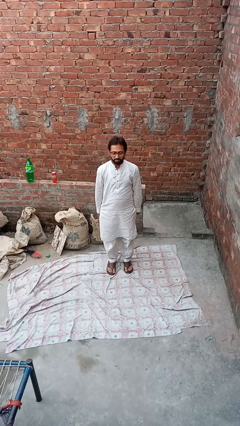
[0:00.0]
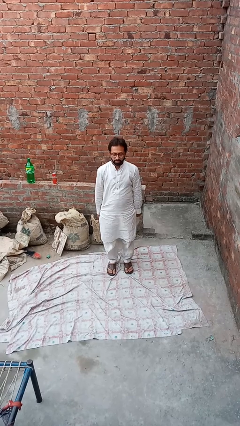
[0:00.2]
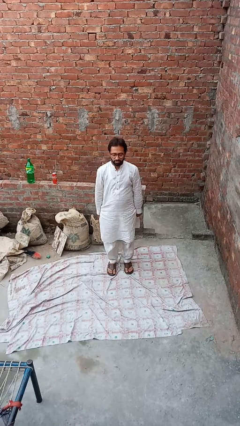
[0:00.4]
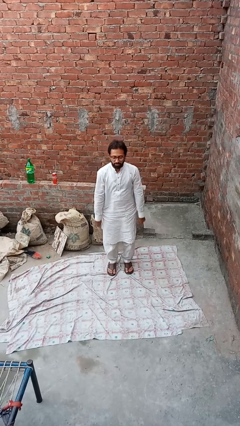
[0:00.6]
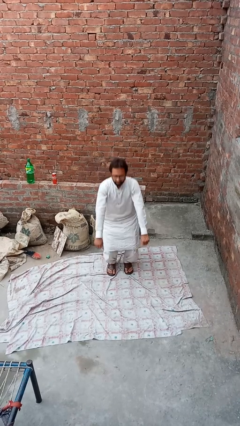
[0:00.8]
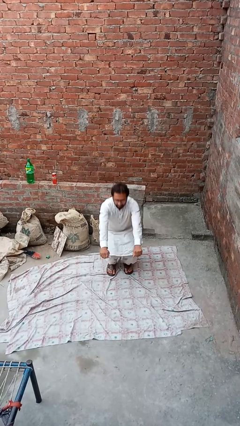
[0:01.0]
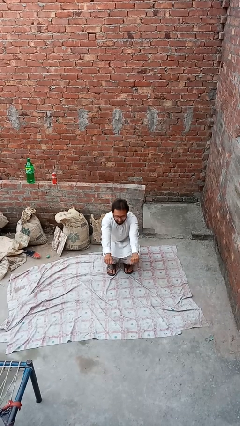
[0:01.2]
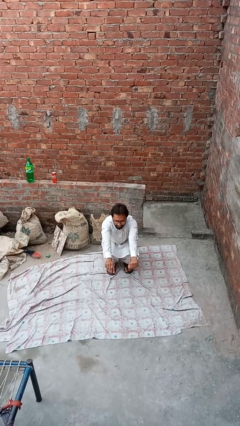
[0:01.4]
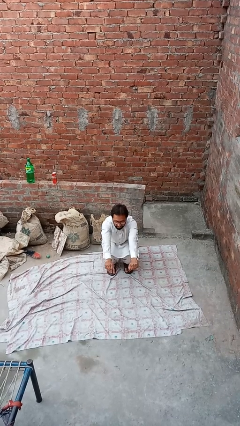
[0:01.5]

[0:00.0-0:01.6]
person squats

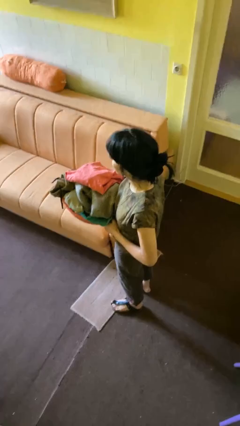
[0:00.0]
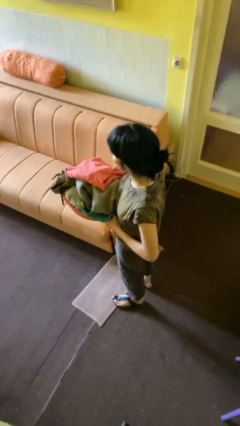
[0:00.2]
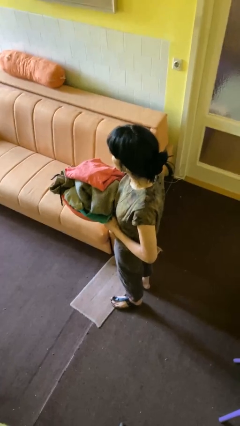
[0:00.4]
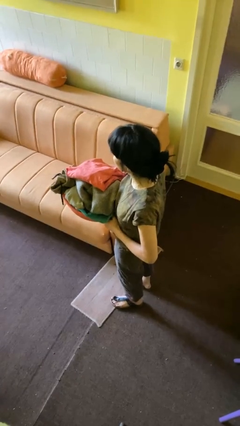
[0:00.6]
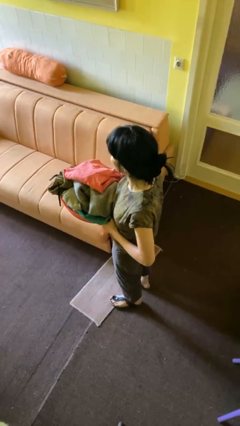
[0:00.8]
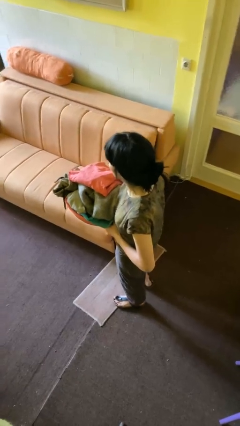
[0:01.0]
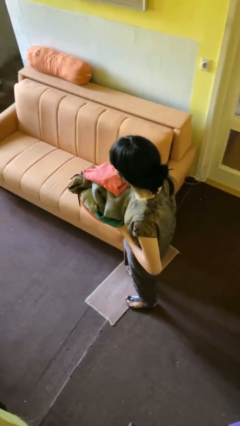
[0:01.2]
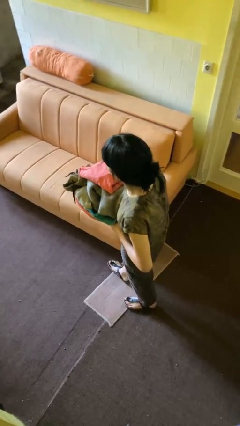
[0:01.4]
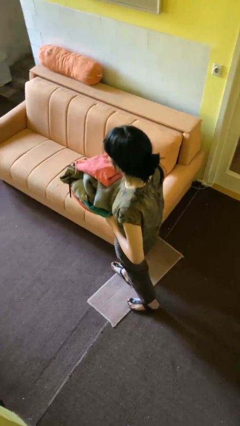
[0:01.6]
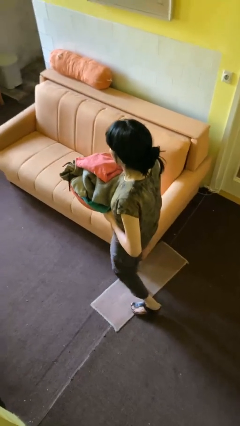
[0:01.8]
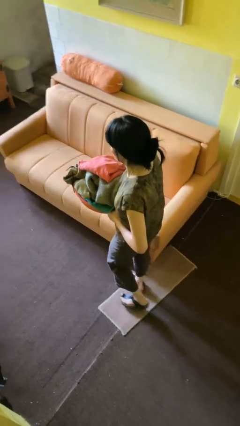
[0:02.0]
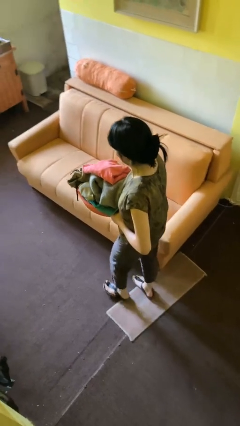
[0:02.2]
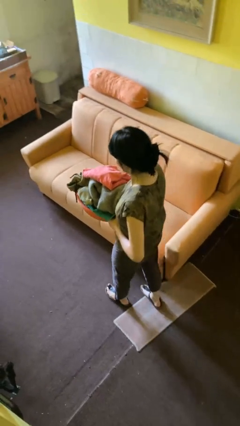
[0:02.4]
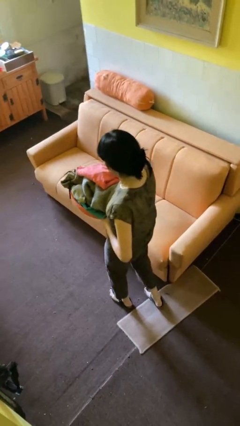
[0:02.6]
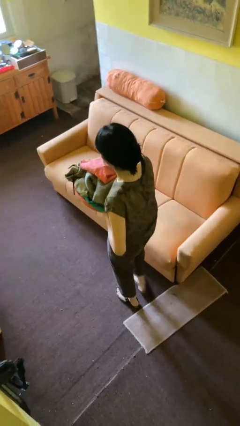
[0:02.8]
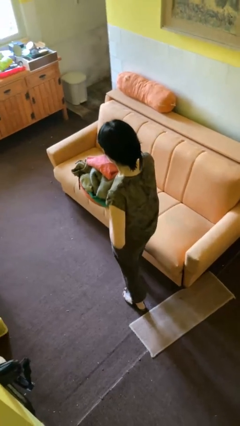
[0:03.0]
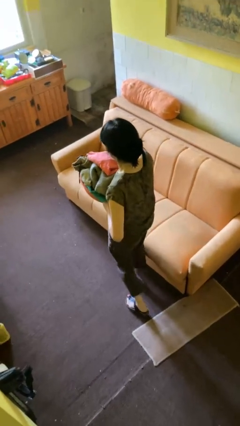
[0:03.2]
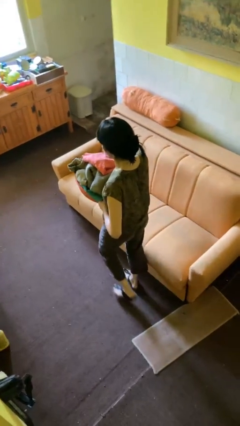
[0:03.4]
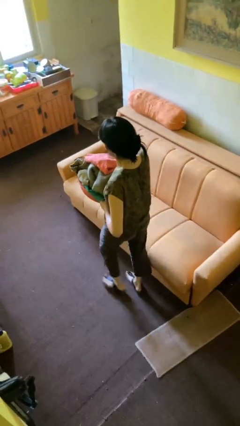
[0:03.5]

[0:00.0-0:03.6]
person carries laundry basket

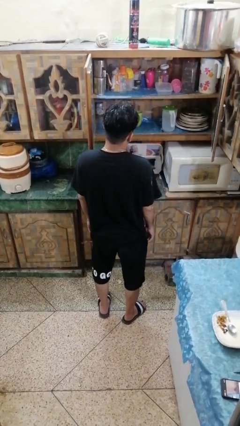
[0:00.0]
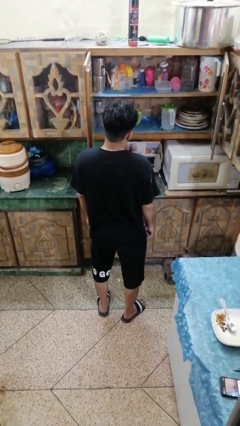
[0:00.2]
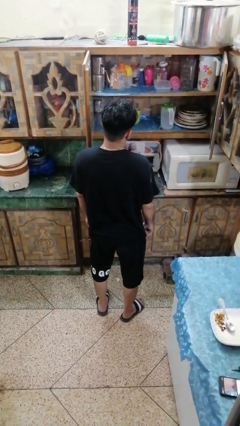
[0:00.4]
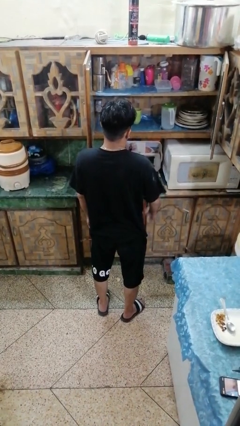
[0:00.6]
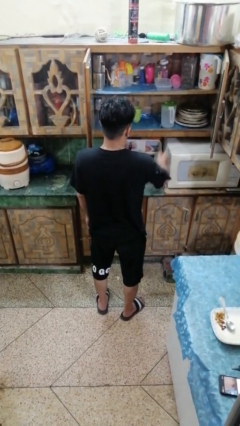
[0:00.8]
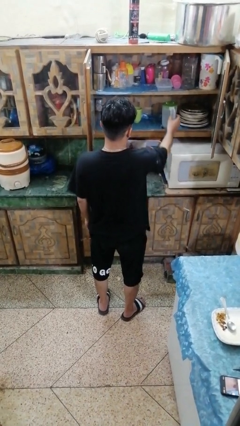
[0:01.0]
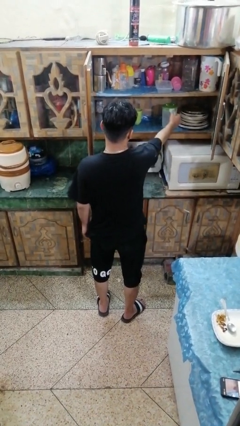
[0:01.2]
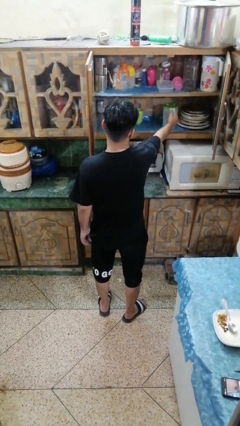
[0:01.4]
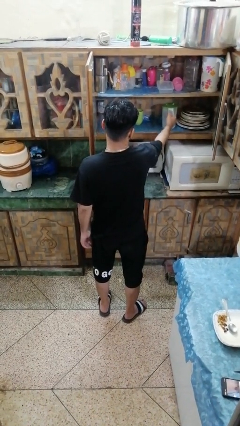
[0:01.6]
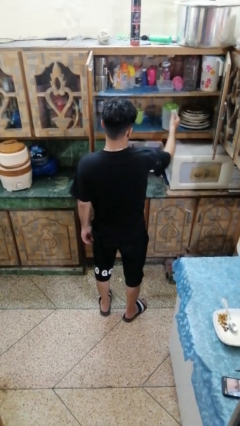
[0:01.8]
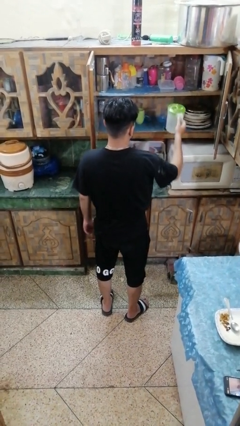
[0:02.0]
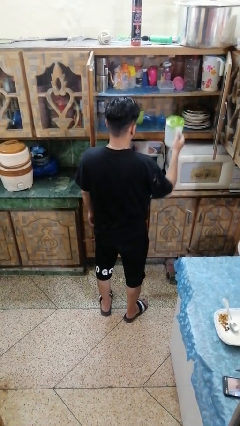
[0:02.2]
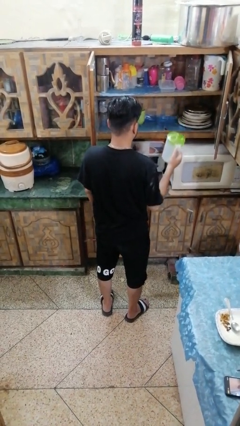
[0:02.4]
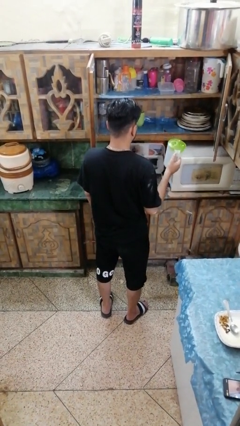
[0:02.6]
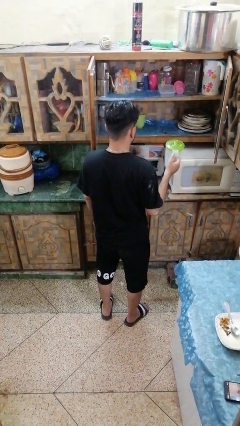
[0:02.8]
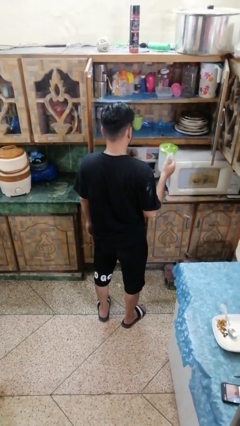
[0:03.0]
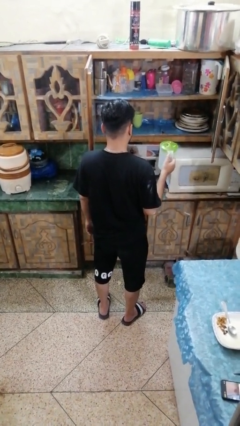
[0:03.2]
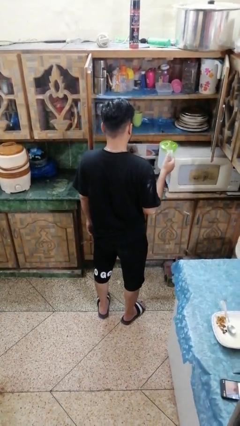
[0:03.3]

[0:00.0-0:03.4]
person picks up object from cabinet

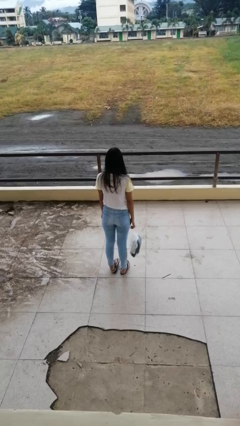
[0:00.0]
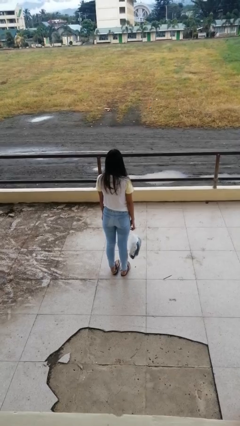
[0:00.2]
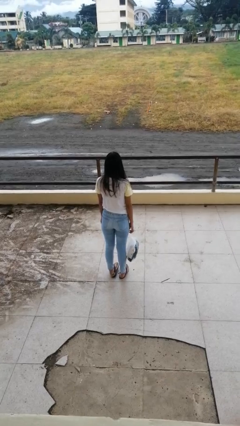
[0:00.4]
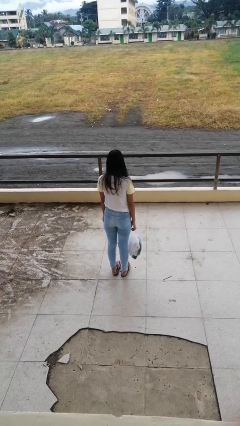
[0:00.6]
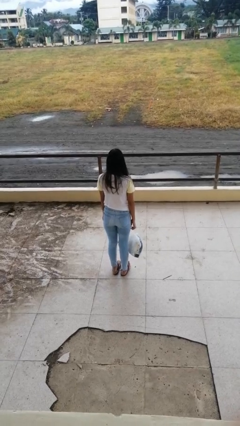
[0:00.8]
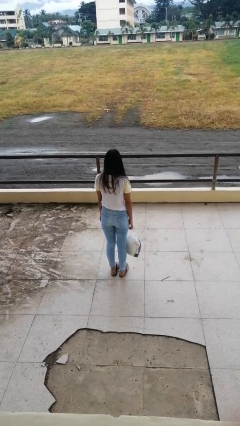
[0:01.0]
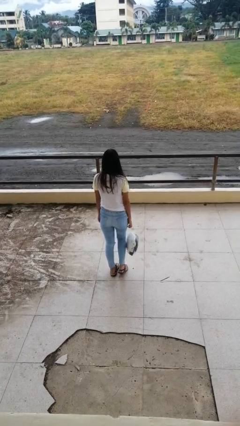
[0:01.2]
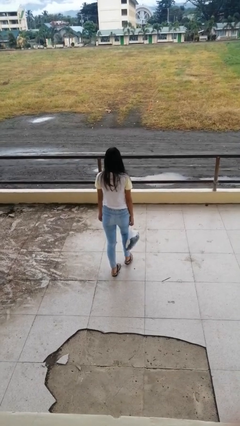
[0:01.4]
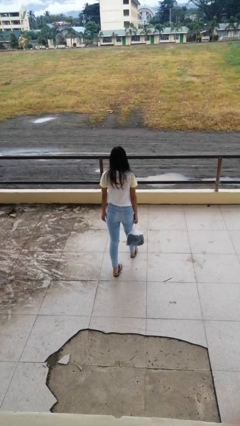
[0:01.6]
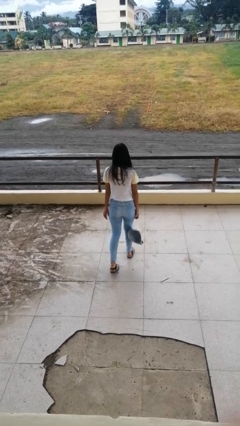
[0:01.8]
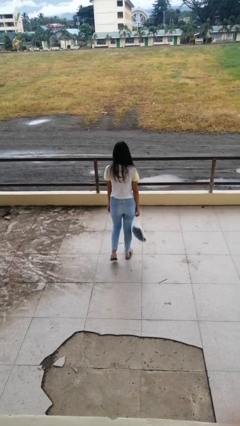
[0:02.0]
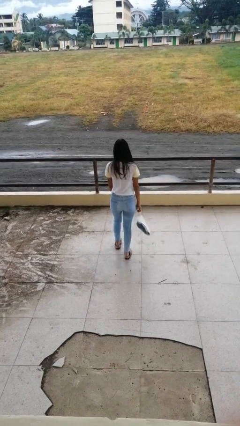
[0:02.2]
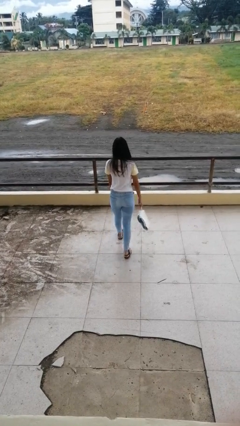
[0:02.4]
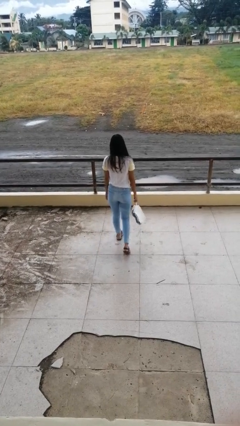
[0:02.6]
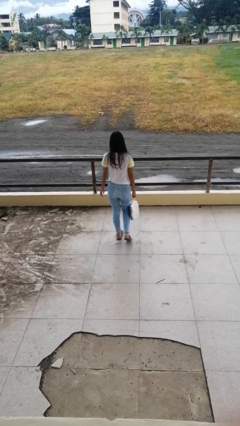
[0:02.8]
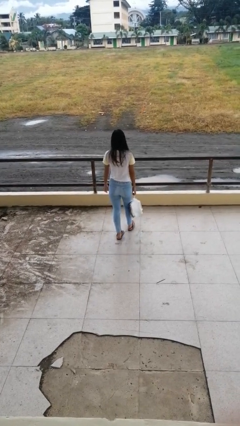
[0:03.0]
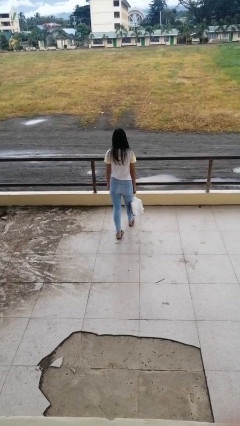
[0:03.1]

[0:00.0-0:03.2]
person carries groceries

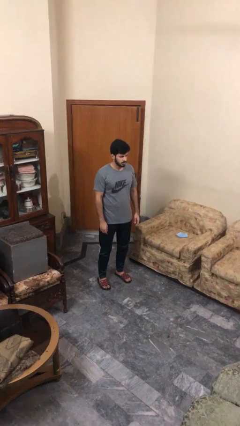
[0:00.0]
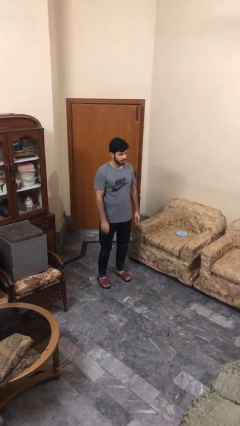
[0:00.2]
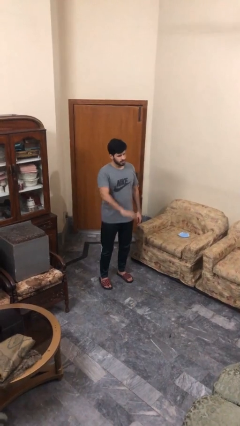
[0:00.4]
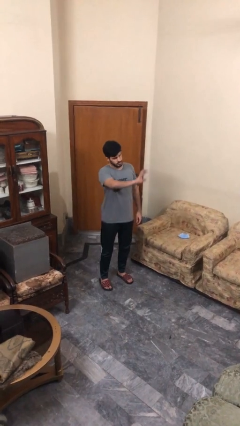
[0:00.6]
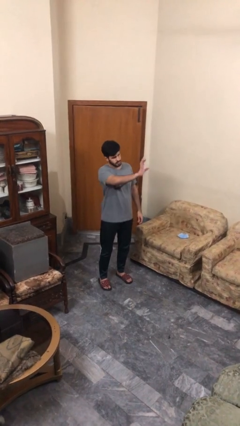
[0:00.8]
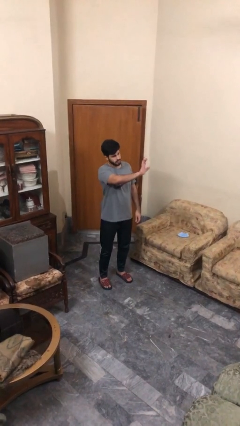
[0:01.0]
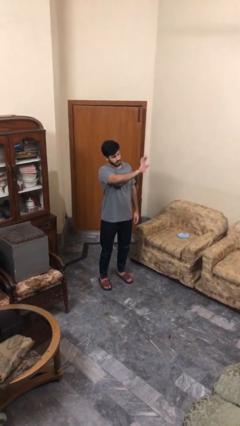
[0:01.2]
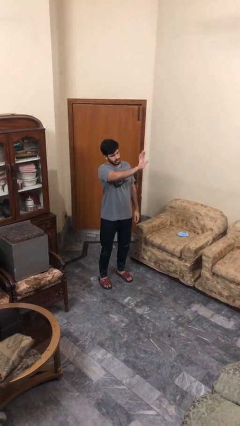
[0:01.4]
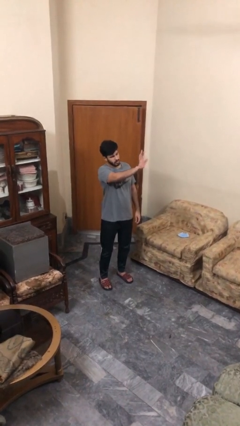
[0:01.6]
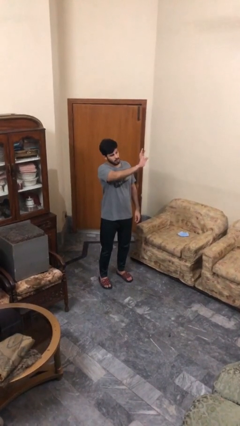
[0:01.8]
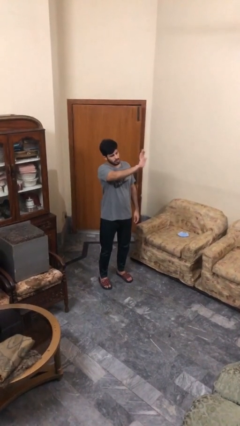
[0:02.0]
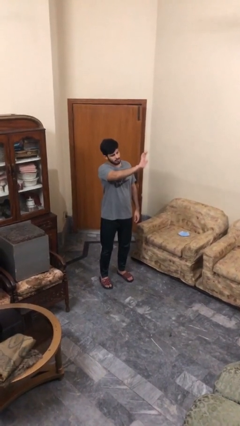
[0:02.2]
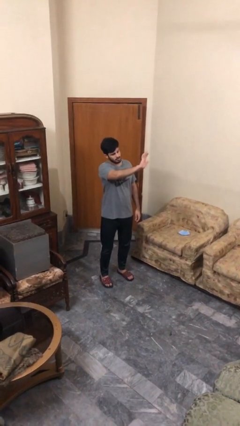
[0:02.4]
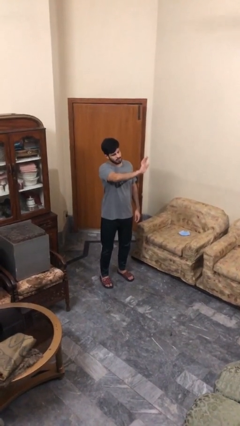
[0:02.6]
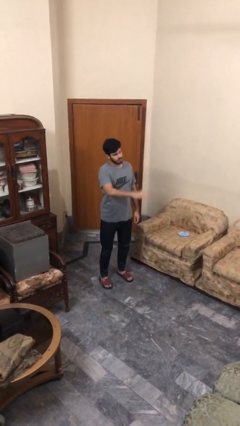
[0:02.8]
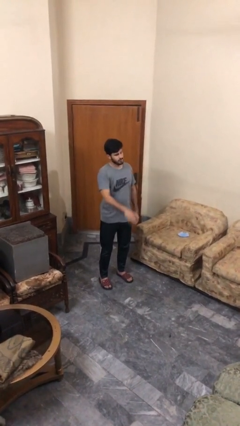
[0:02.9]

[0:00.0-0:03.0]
person waves at person

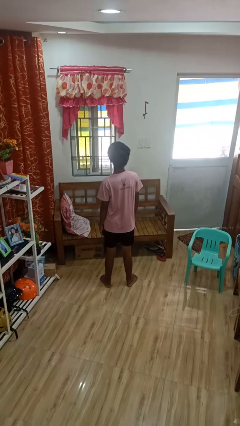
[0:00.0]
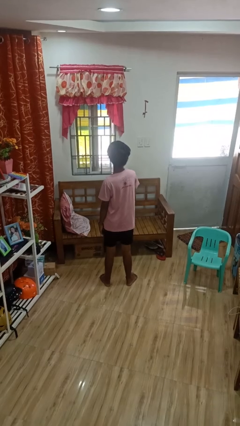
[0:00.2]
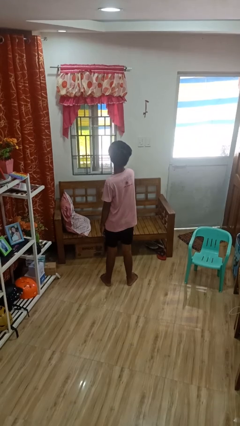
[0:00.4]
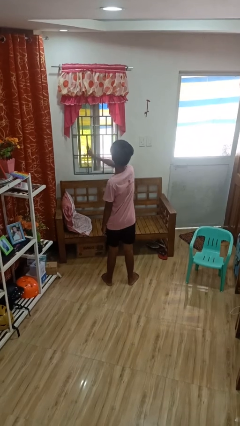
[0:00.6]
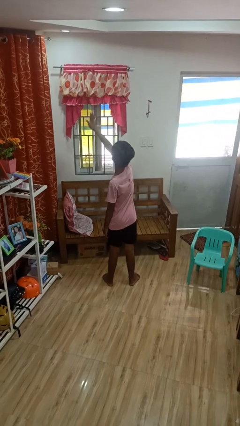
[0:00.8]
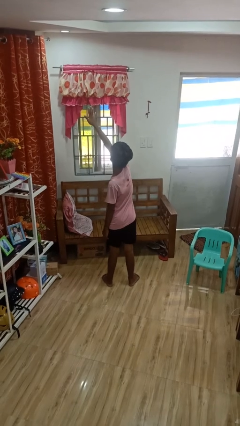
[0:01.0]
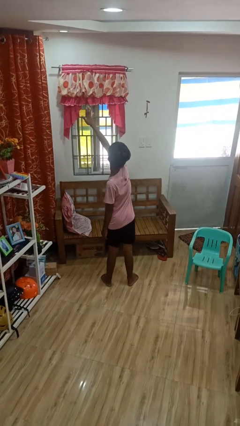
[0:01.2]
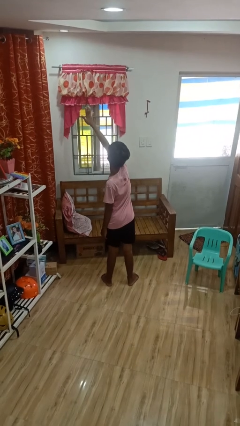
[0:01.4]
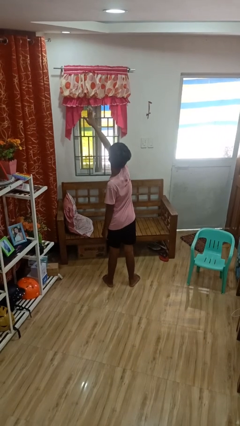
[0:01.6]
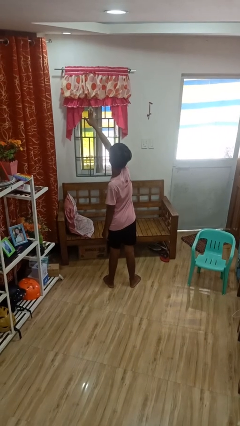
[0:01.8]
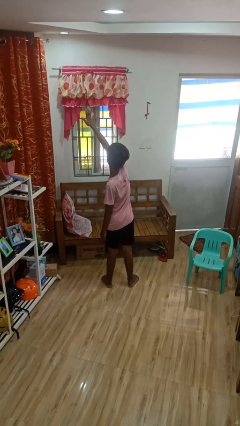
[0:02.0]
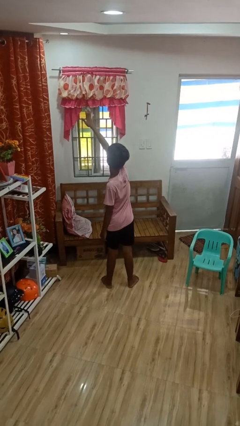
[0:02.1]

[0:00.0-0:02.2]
person gestures stop

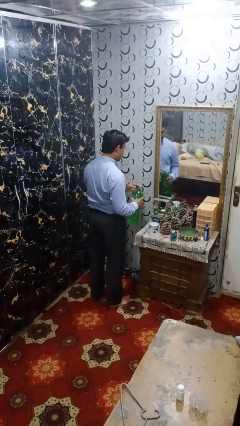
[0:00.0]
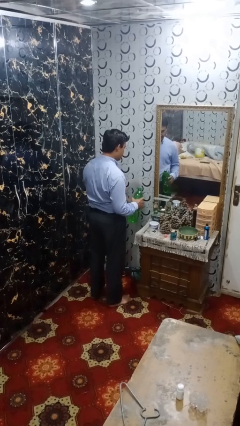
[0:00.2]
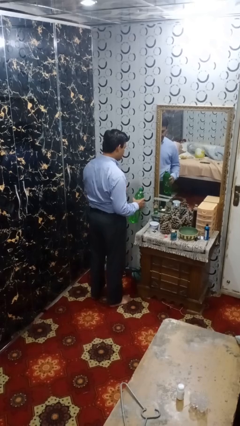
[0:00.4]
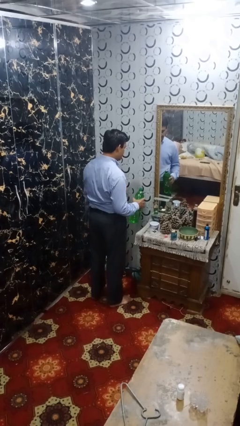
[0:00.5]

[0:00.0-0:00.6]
person screws lid to bottle
